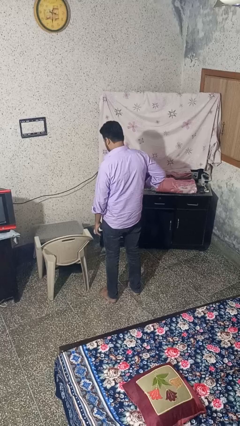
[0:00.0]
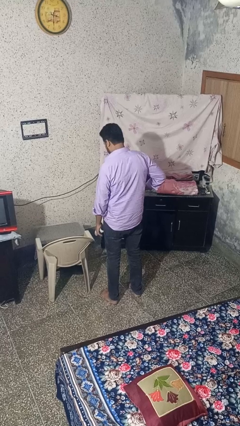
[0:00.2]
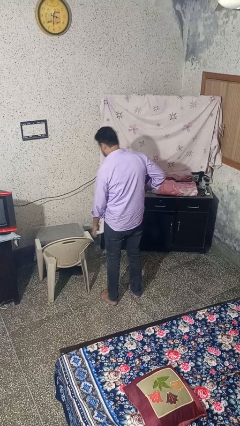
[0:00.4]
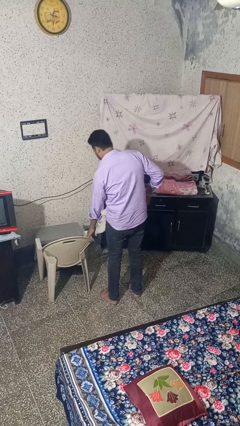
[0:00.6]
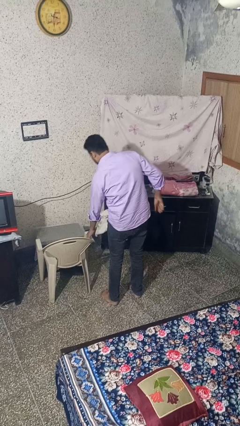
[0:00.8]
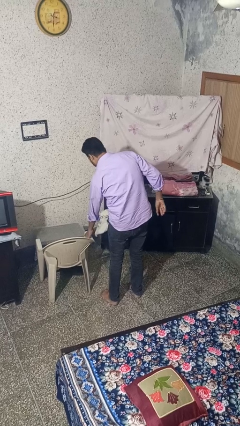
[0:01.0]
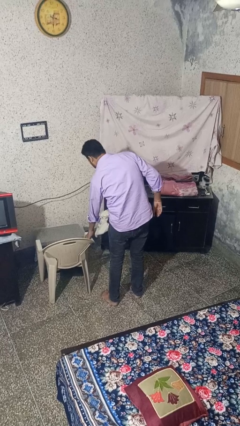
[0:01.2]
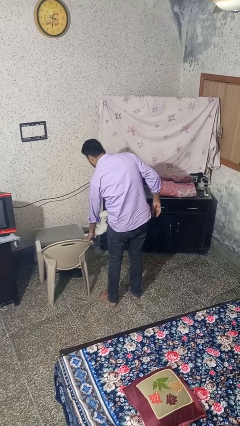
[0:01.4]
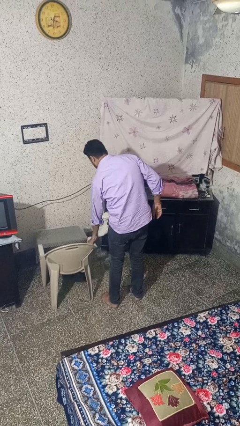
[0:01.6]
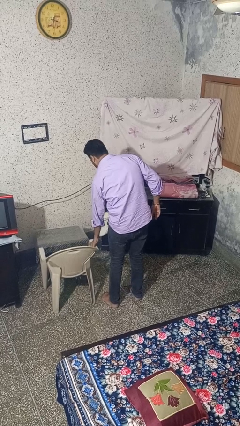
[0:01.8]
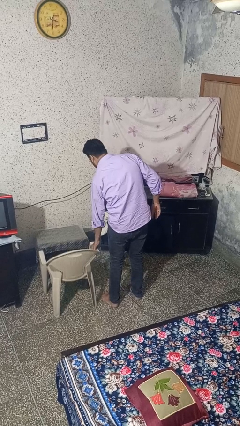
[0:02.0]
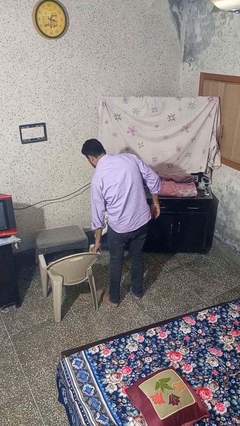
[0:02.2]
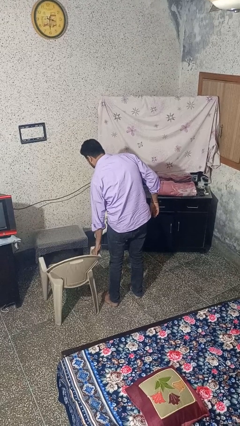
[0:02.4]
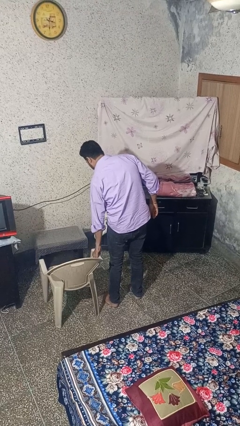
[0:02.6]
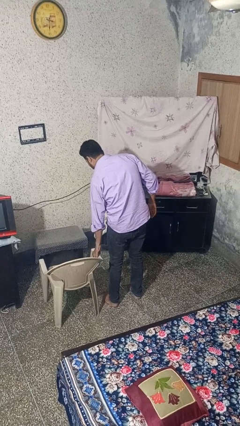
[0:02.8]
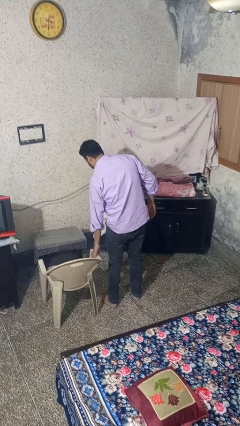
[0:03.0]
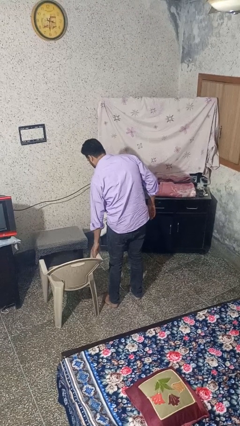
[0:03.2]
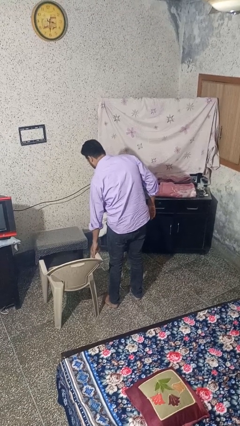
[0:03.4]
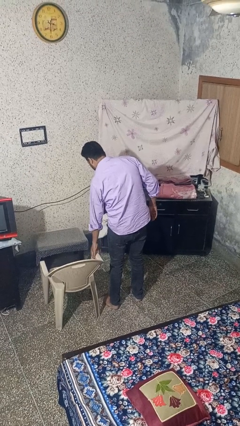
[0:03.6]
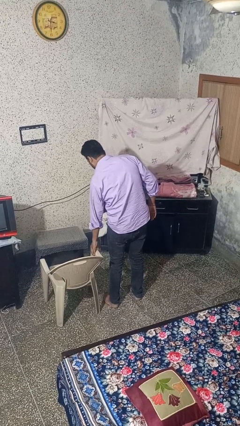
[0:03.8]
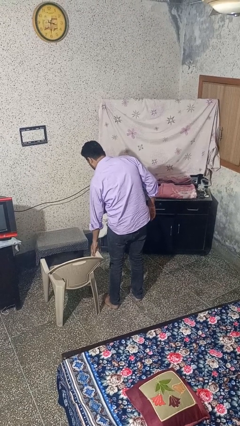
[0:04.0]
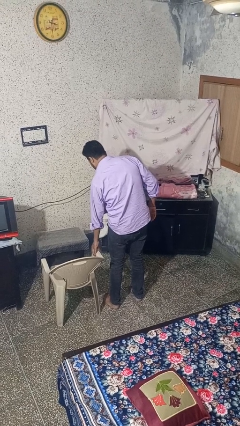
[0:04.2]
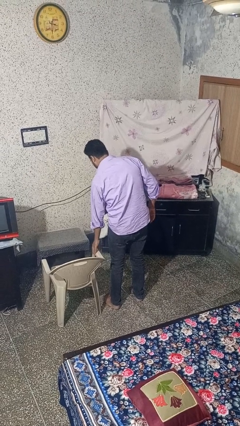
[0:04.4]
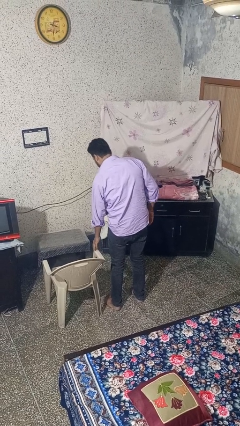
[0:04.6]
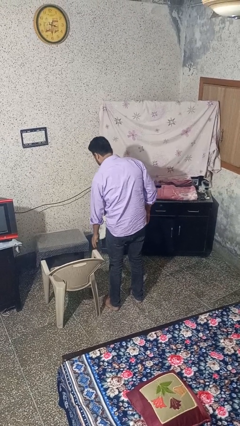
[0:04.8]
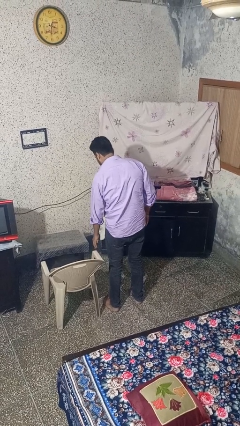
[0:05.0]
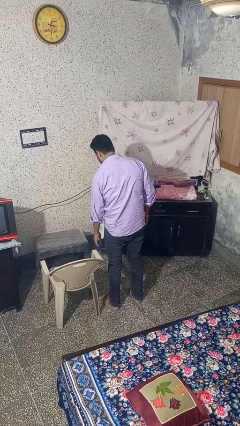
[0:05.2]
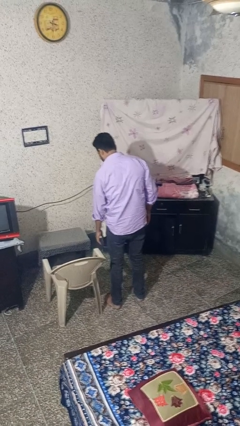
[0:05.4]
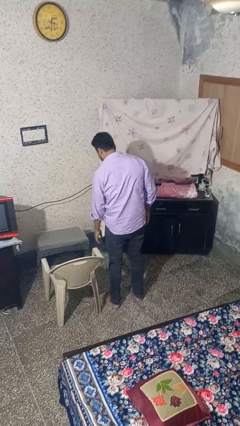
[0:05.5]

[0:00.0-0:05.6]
person pulls out chair

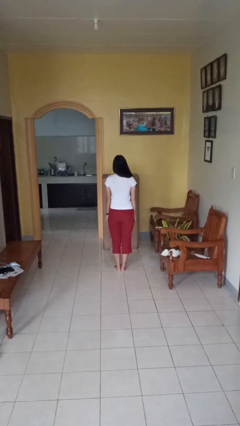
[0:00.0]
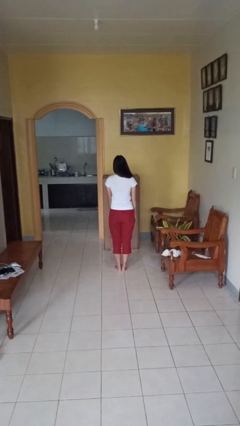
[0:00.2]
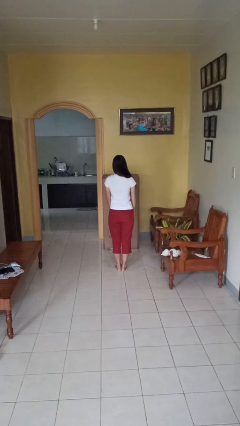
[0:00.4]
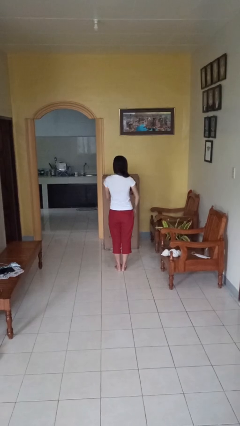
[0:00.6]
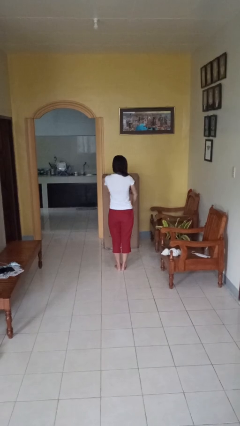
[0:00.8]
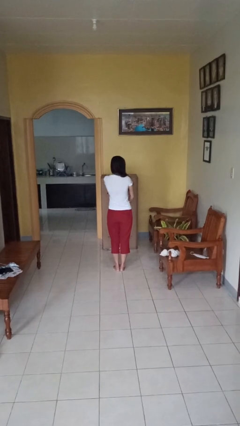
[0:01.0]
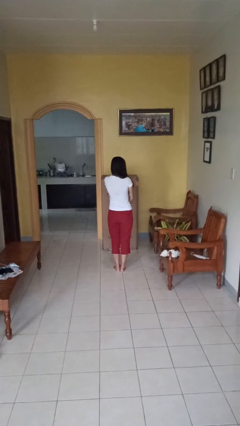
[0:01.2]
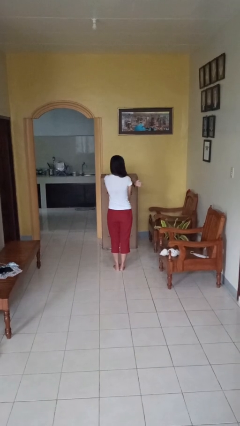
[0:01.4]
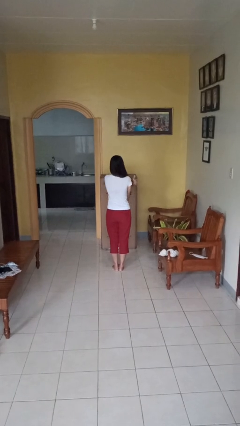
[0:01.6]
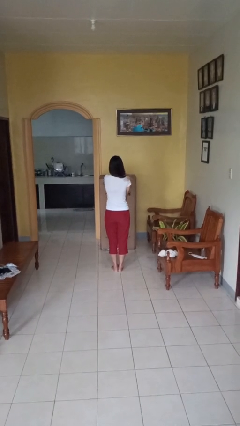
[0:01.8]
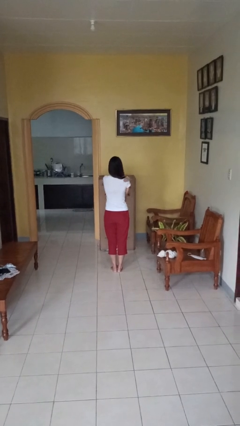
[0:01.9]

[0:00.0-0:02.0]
person swats bug

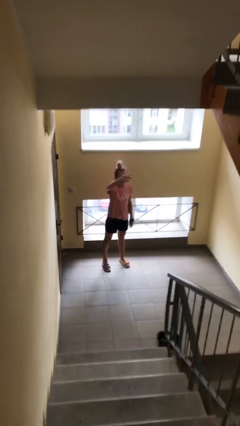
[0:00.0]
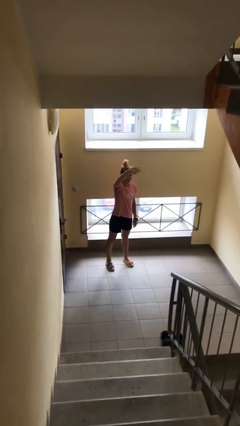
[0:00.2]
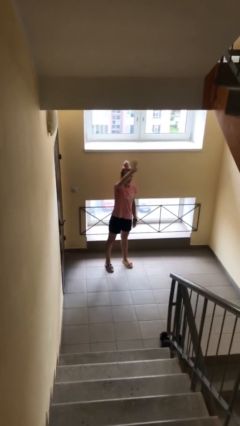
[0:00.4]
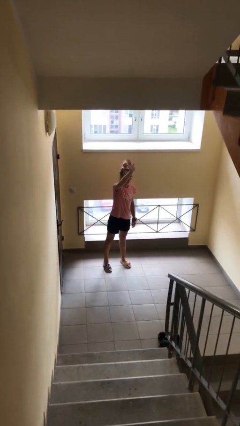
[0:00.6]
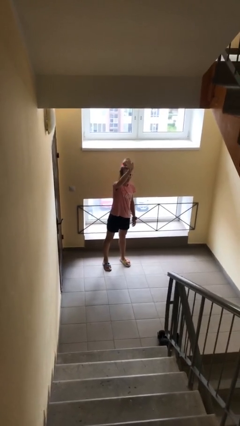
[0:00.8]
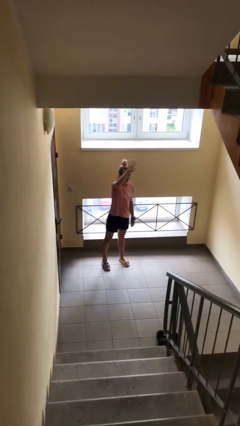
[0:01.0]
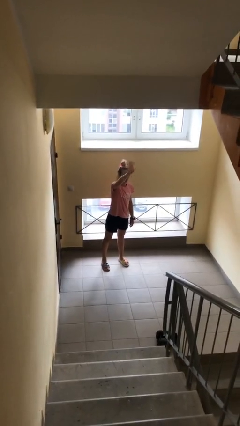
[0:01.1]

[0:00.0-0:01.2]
person waves at person

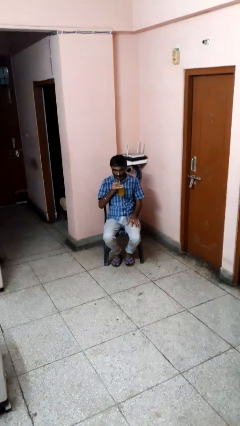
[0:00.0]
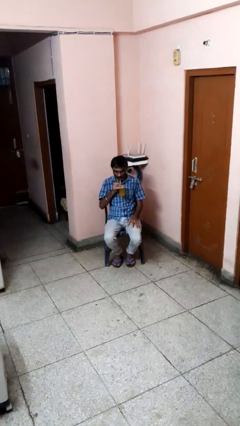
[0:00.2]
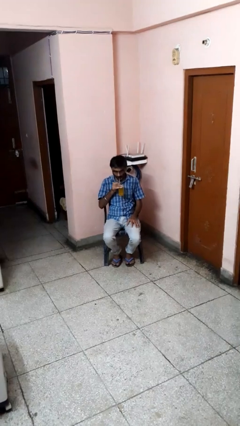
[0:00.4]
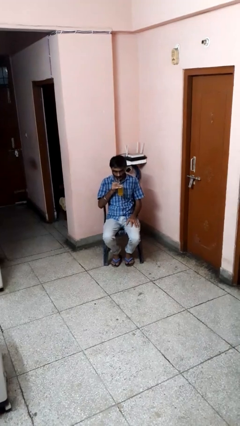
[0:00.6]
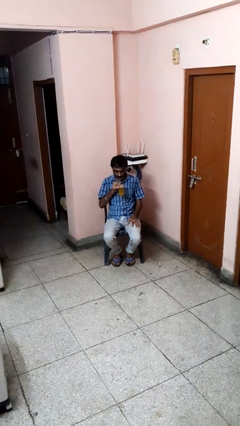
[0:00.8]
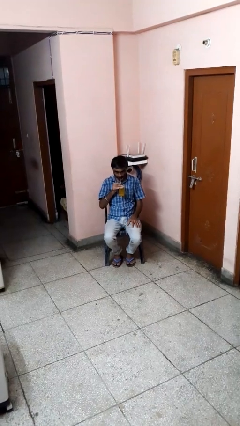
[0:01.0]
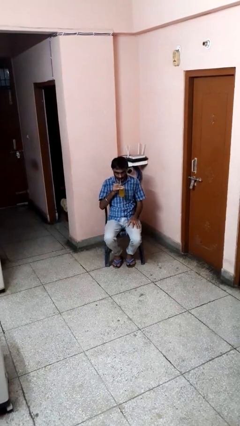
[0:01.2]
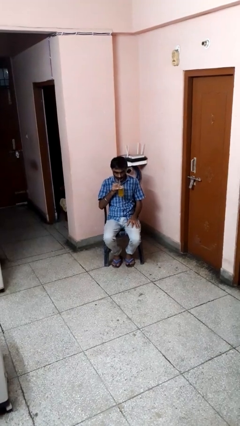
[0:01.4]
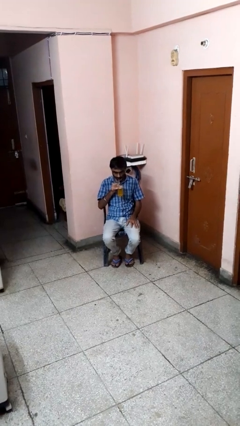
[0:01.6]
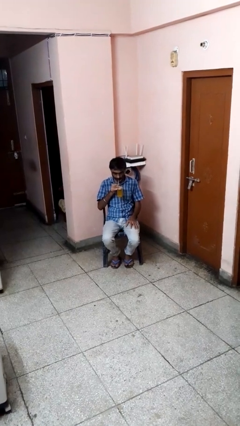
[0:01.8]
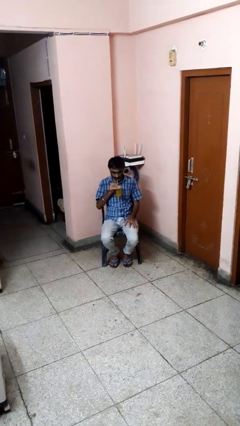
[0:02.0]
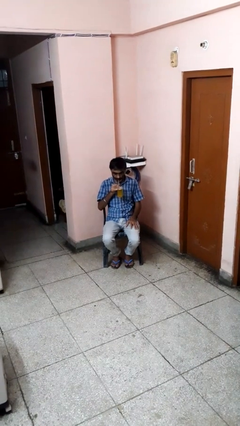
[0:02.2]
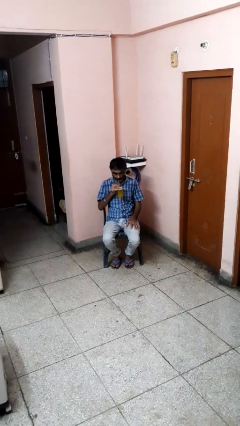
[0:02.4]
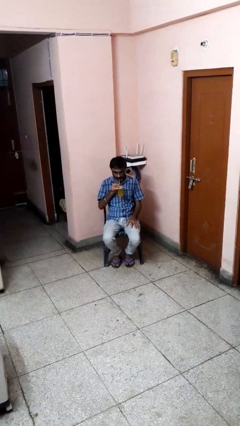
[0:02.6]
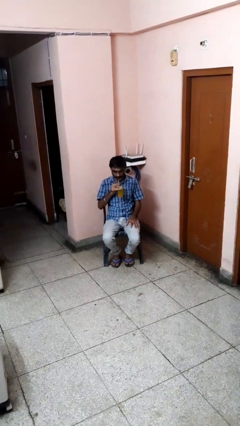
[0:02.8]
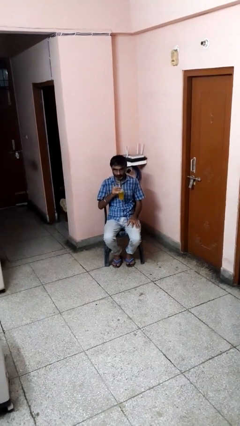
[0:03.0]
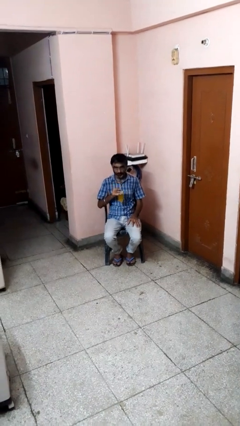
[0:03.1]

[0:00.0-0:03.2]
person drinks from straw

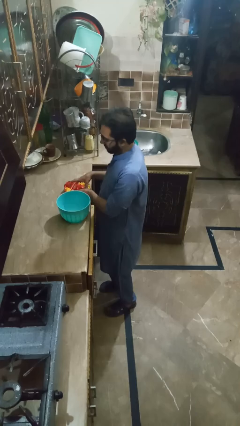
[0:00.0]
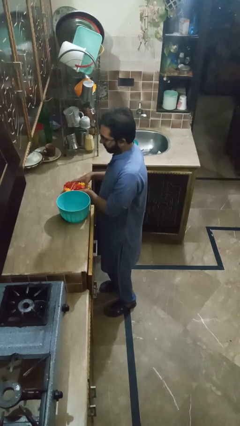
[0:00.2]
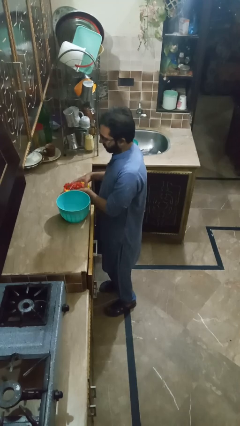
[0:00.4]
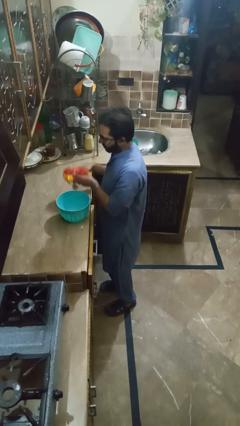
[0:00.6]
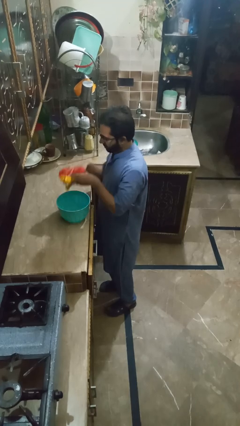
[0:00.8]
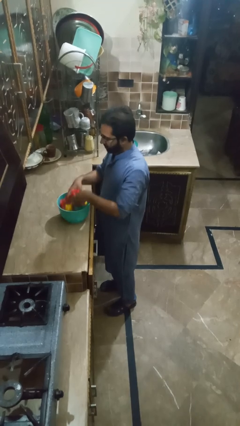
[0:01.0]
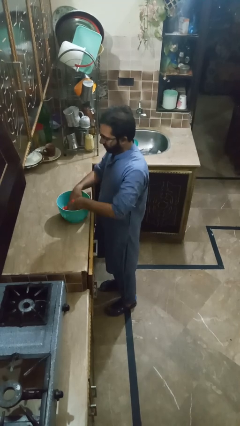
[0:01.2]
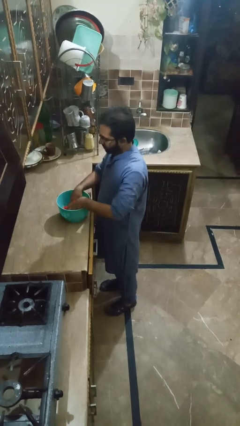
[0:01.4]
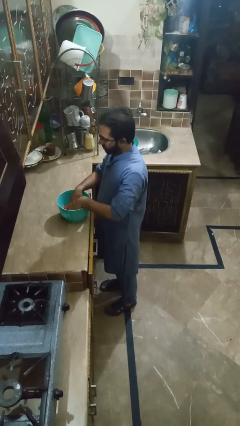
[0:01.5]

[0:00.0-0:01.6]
person pours into bowl

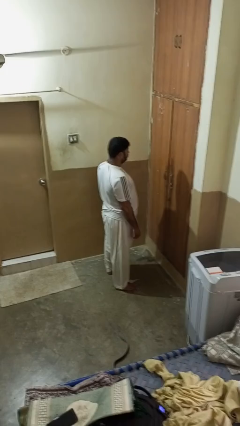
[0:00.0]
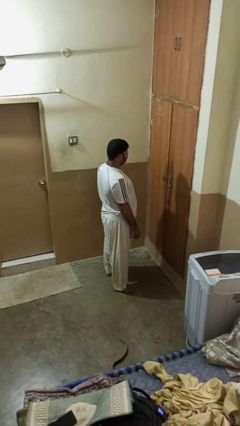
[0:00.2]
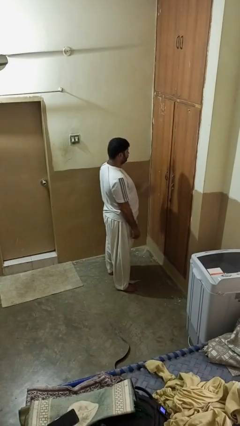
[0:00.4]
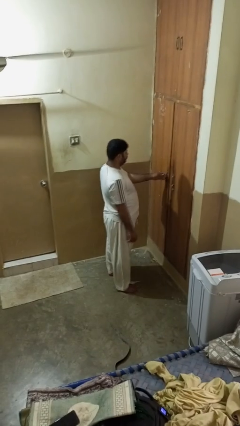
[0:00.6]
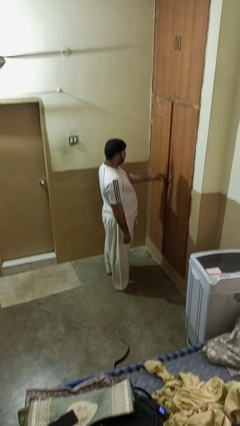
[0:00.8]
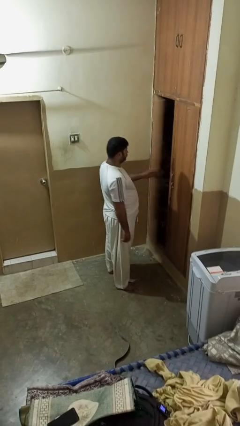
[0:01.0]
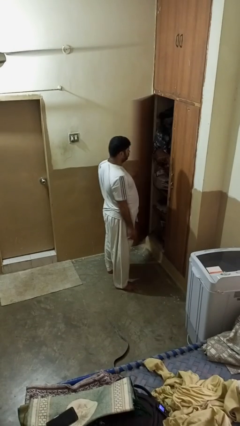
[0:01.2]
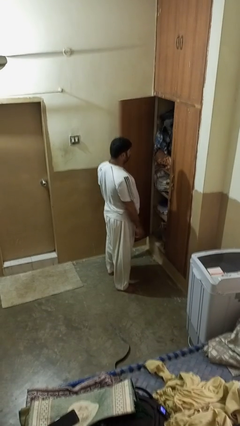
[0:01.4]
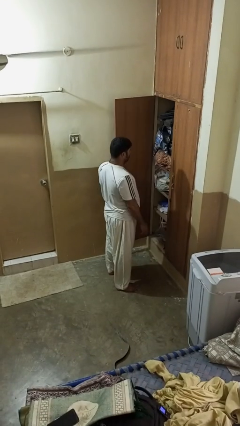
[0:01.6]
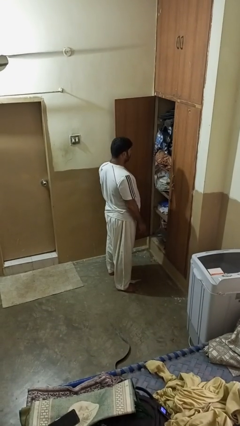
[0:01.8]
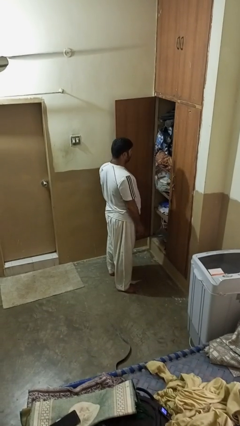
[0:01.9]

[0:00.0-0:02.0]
person opens closet door

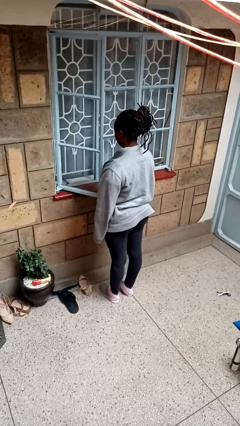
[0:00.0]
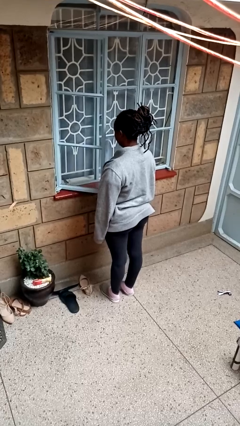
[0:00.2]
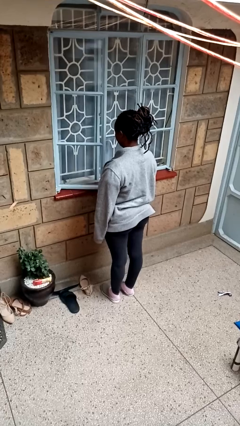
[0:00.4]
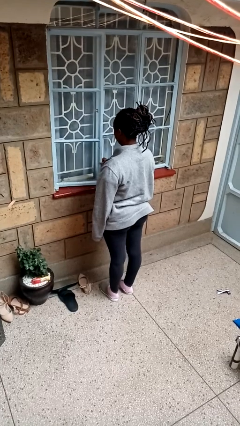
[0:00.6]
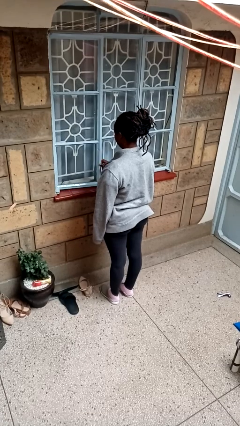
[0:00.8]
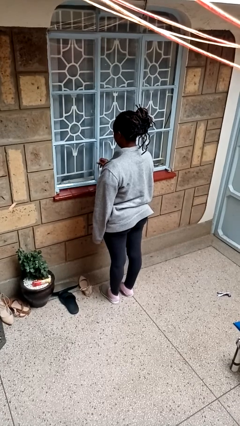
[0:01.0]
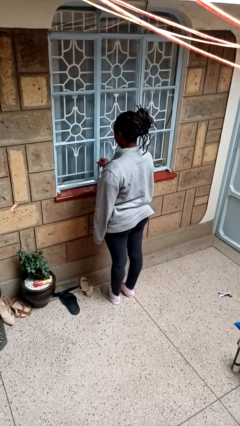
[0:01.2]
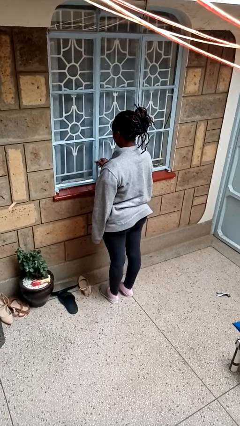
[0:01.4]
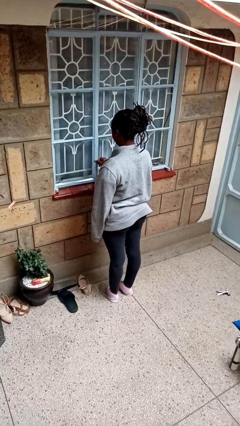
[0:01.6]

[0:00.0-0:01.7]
person closes home window
